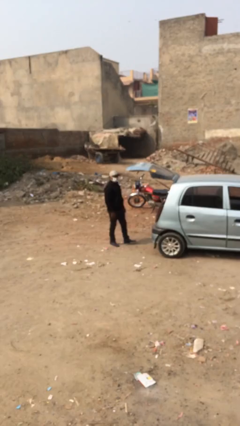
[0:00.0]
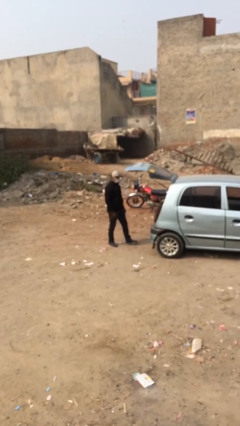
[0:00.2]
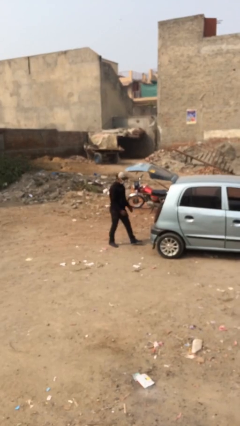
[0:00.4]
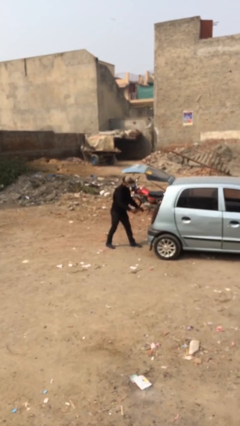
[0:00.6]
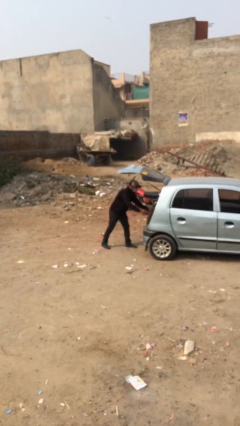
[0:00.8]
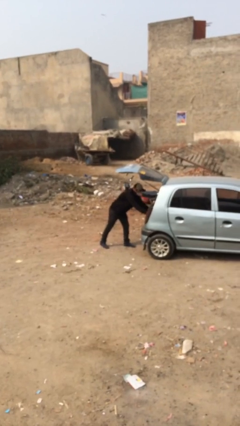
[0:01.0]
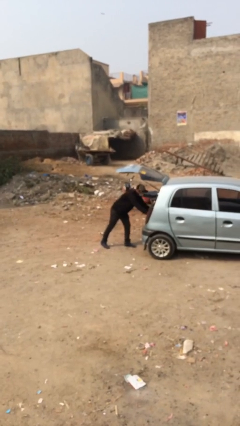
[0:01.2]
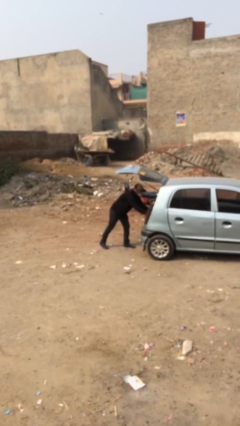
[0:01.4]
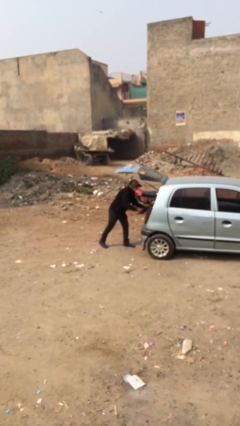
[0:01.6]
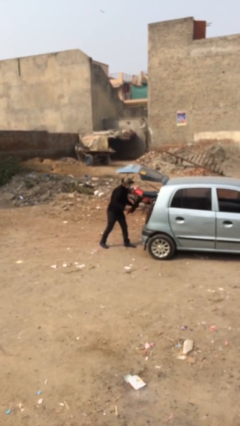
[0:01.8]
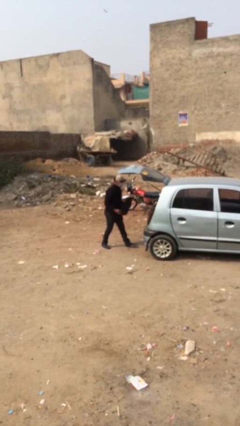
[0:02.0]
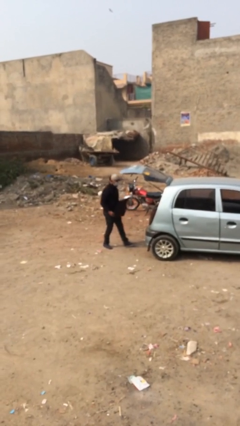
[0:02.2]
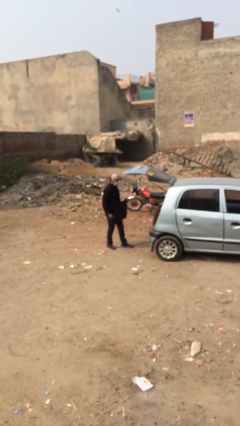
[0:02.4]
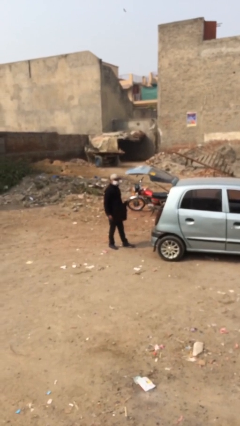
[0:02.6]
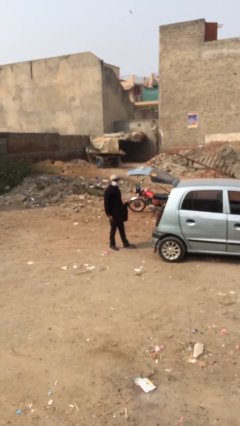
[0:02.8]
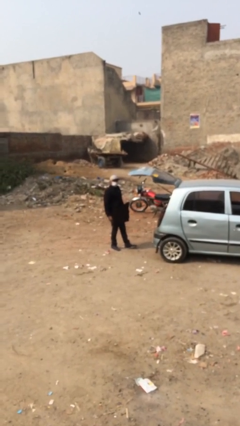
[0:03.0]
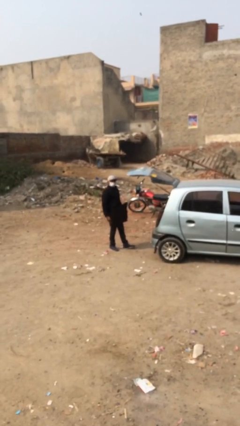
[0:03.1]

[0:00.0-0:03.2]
person unloads car

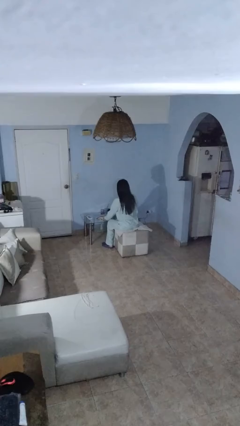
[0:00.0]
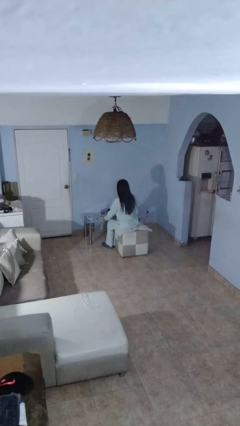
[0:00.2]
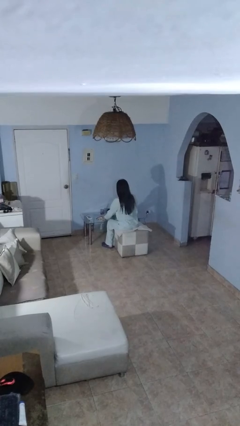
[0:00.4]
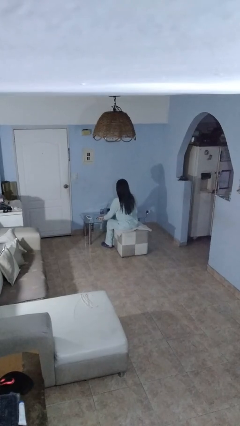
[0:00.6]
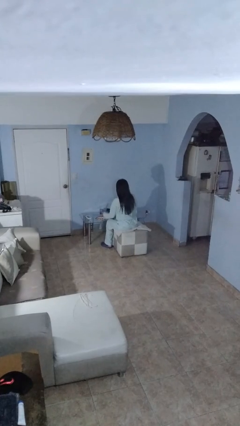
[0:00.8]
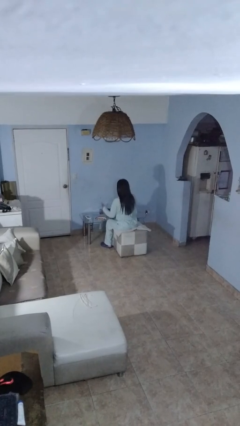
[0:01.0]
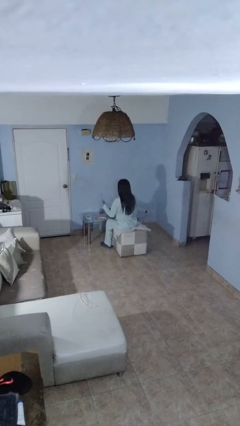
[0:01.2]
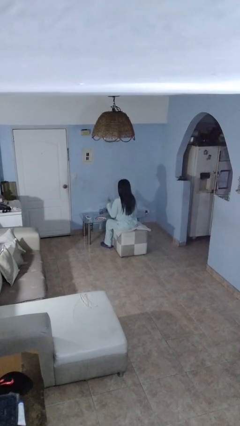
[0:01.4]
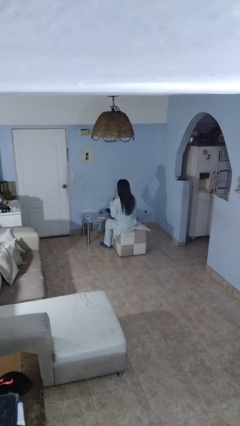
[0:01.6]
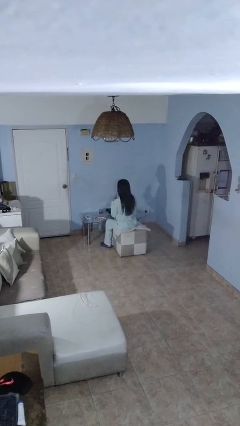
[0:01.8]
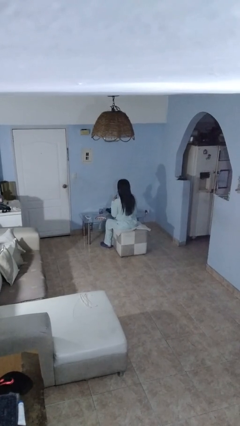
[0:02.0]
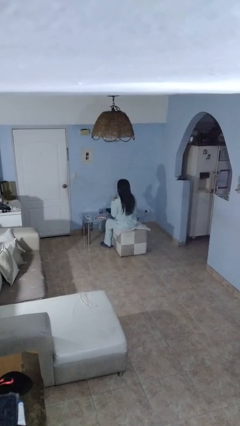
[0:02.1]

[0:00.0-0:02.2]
person turns off lamp

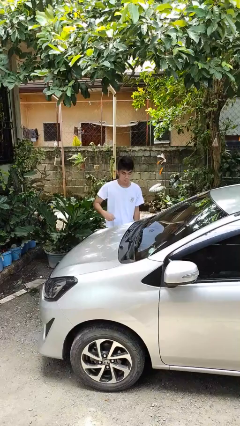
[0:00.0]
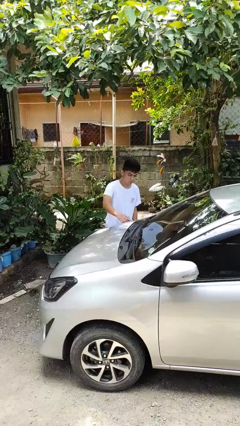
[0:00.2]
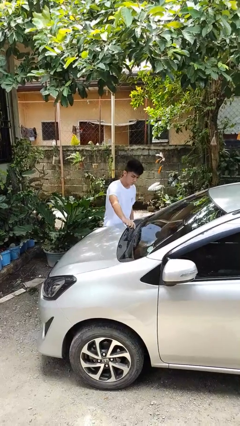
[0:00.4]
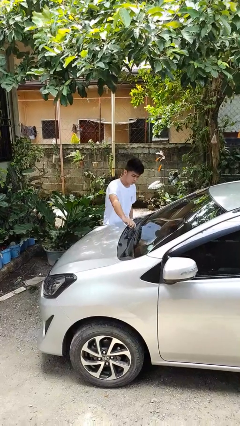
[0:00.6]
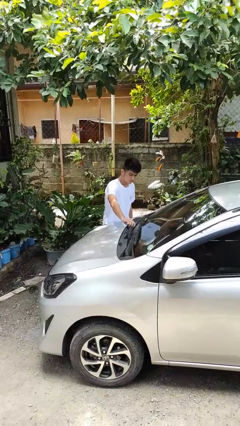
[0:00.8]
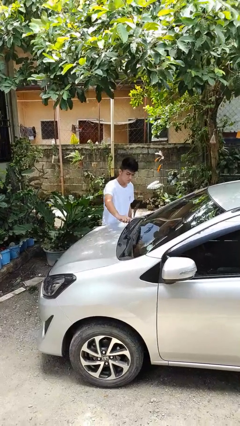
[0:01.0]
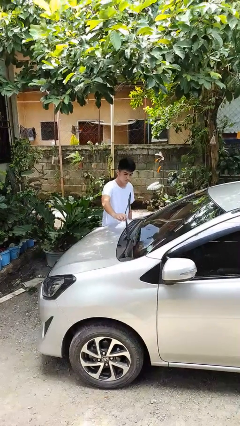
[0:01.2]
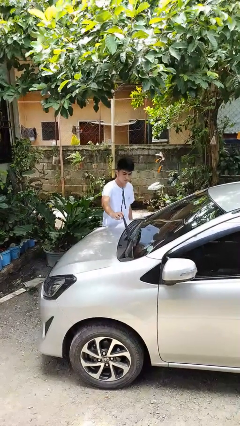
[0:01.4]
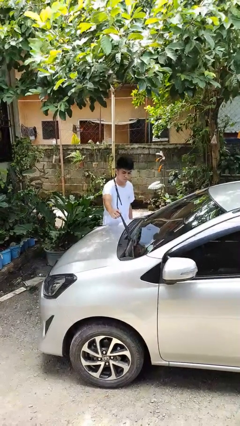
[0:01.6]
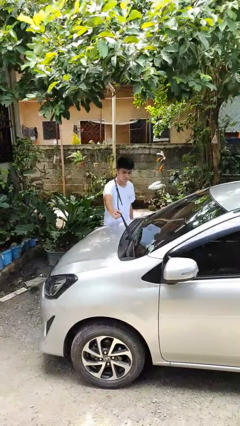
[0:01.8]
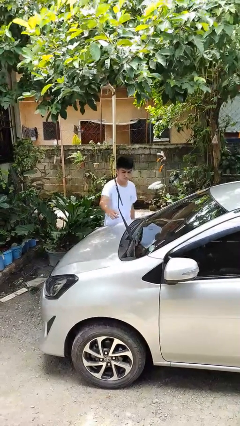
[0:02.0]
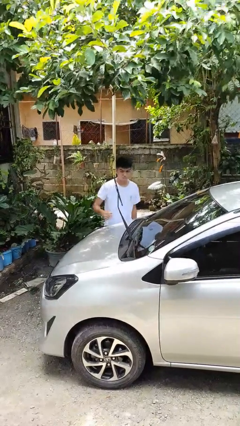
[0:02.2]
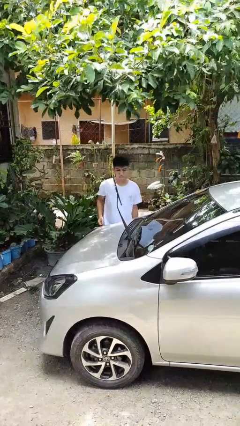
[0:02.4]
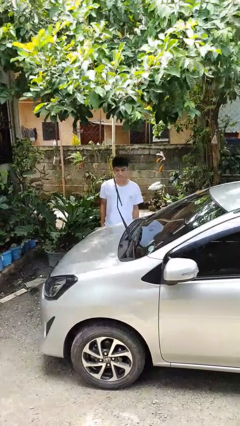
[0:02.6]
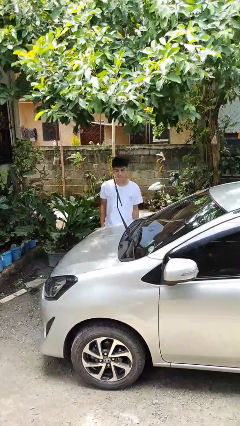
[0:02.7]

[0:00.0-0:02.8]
person flips up car wipers

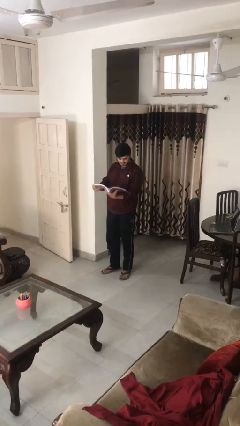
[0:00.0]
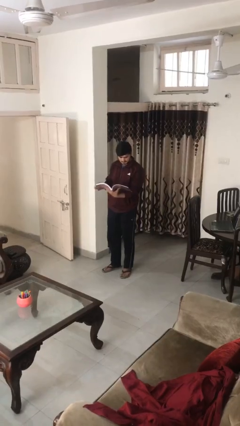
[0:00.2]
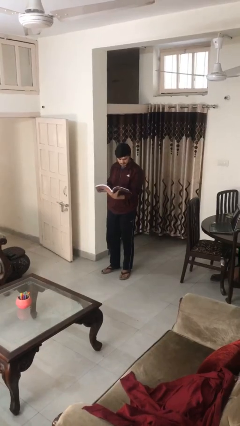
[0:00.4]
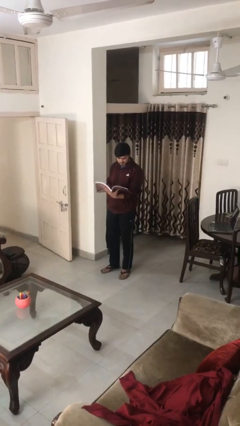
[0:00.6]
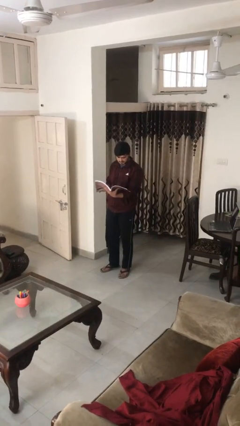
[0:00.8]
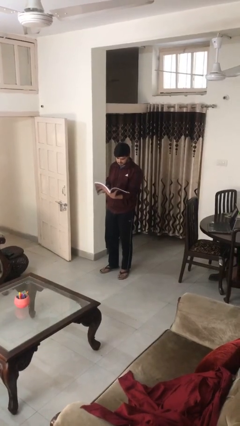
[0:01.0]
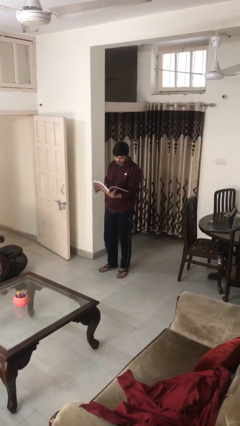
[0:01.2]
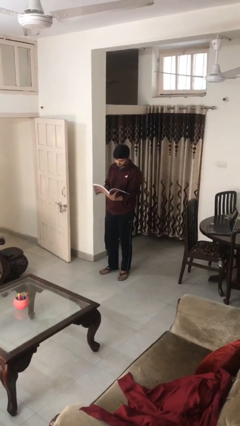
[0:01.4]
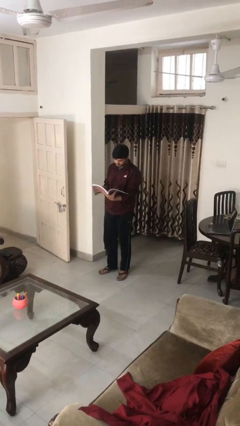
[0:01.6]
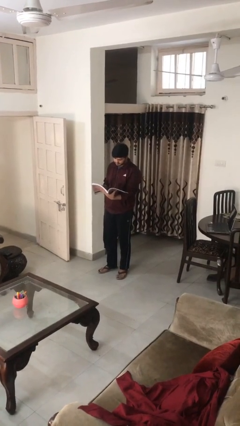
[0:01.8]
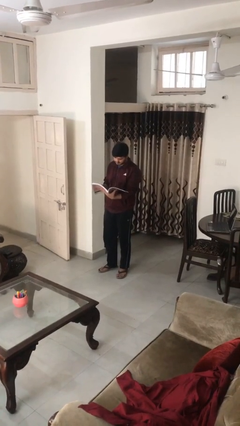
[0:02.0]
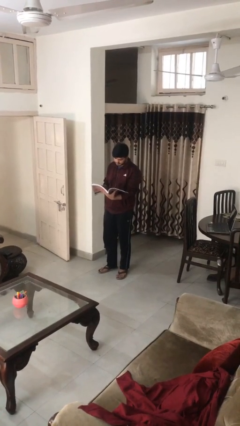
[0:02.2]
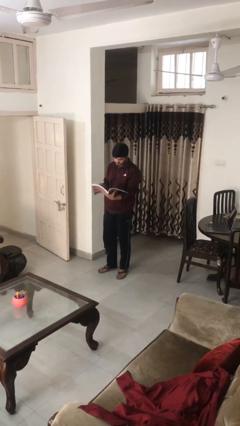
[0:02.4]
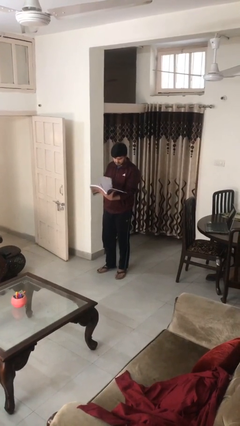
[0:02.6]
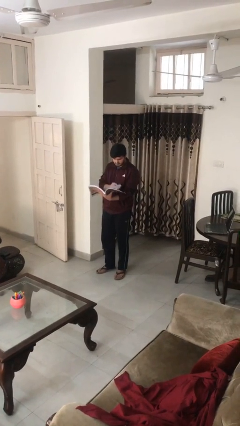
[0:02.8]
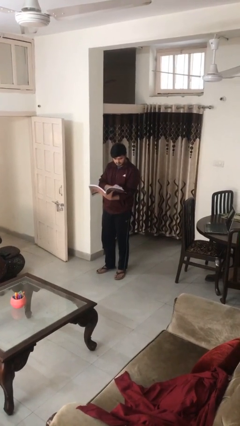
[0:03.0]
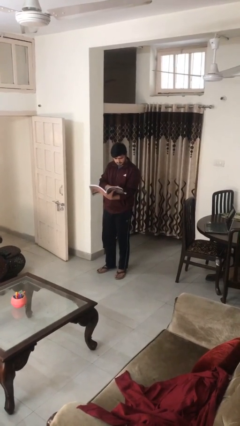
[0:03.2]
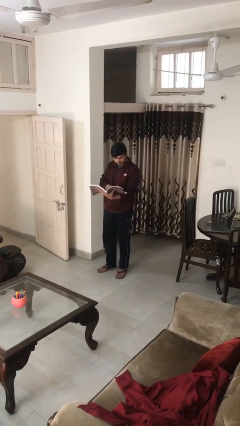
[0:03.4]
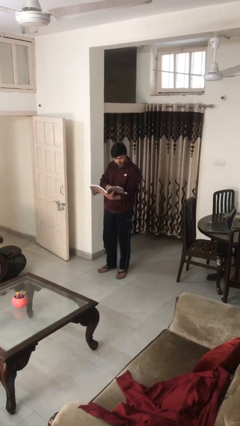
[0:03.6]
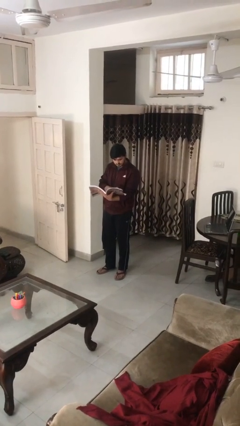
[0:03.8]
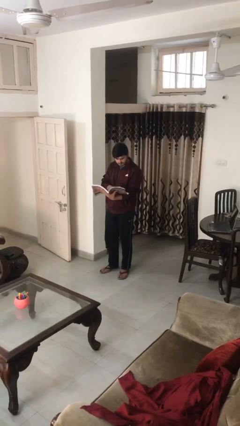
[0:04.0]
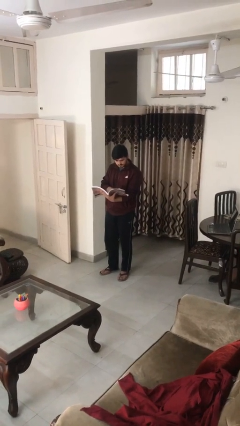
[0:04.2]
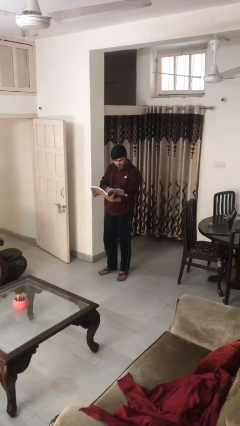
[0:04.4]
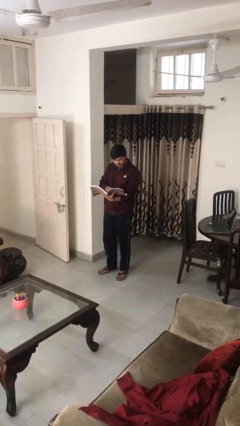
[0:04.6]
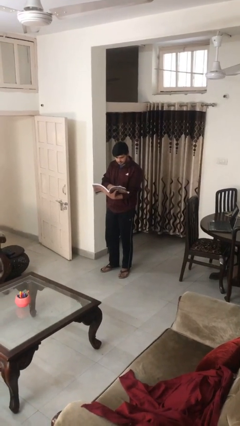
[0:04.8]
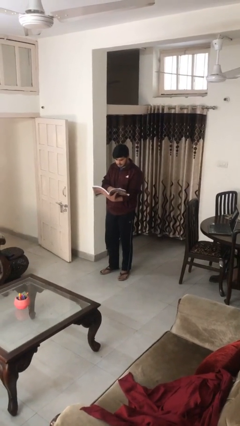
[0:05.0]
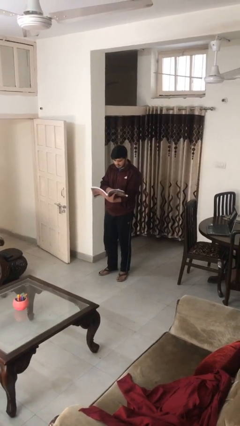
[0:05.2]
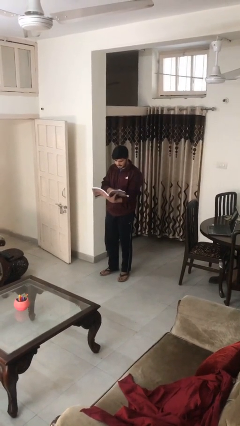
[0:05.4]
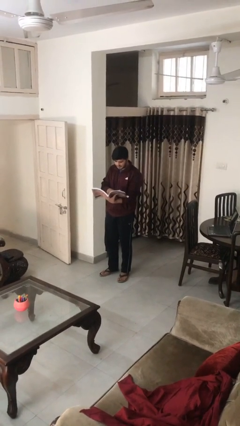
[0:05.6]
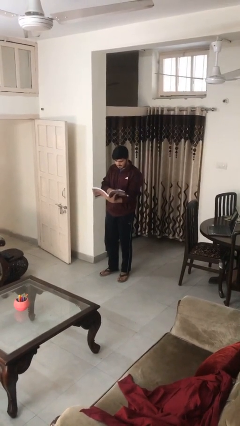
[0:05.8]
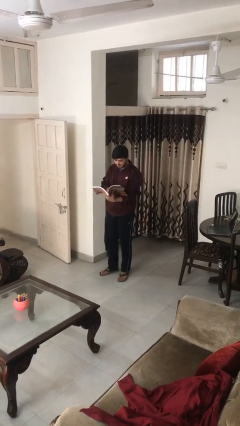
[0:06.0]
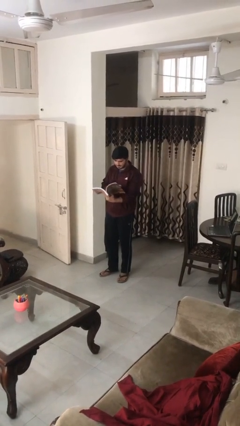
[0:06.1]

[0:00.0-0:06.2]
person reads document

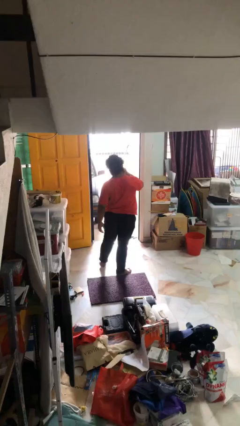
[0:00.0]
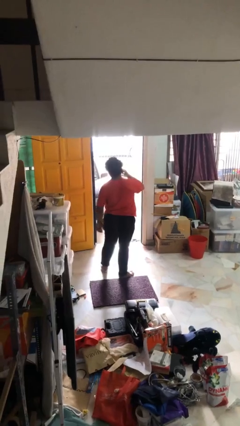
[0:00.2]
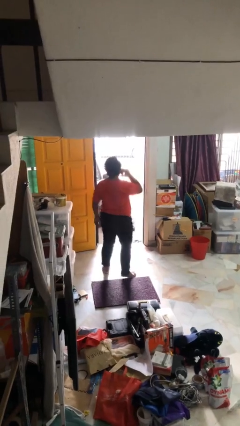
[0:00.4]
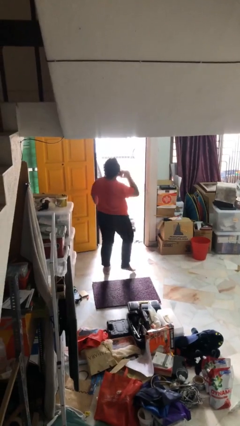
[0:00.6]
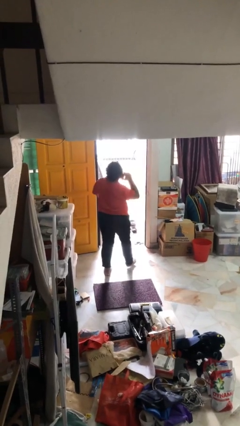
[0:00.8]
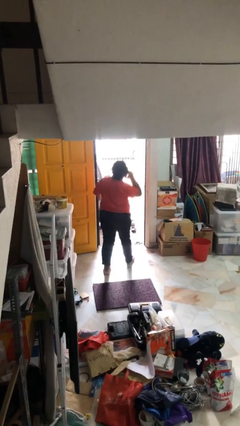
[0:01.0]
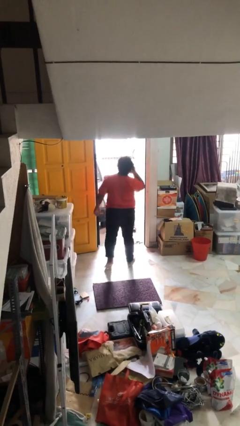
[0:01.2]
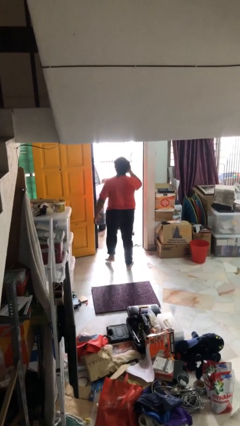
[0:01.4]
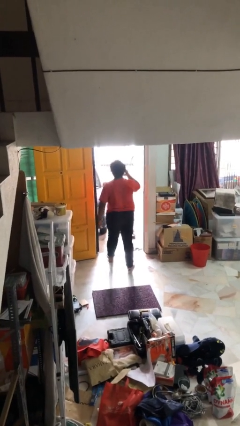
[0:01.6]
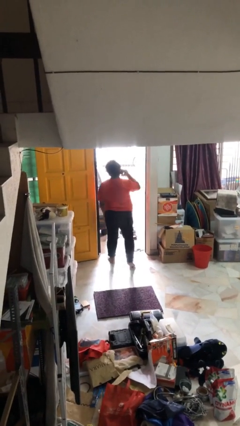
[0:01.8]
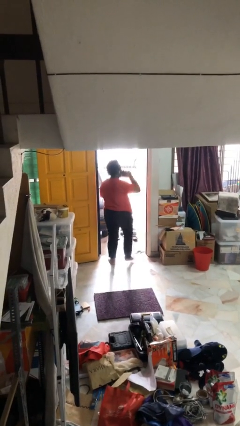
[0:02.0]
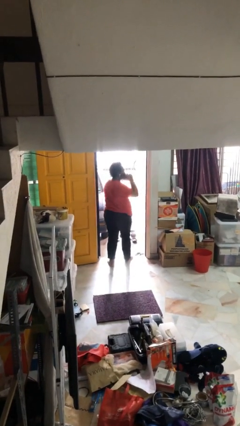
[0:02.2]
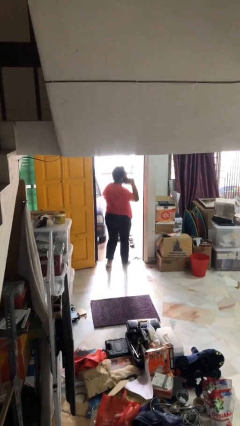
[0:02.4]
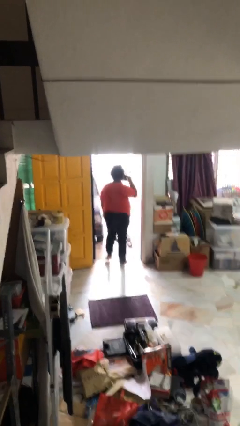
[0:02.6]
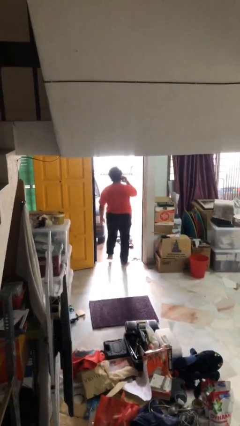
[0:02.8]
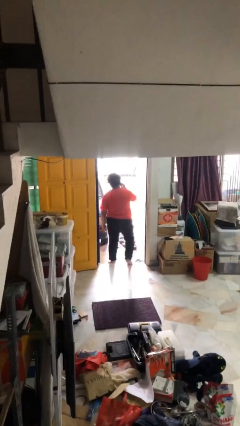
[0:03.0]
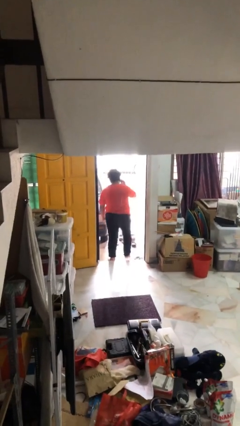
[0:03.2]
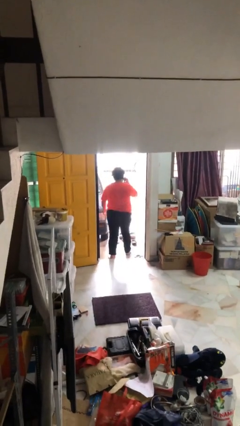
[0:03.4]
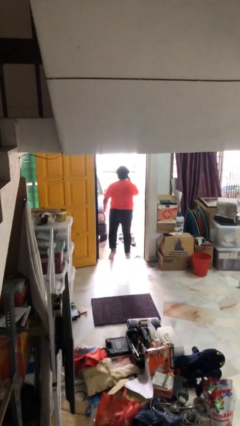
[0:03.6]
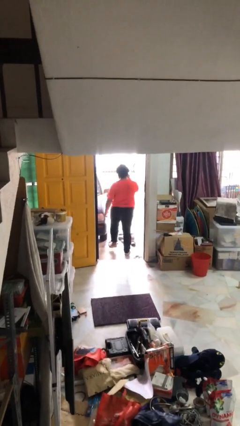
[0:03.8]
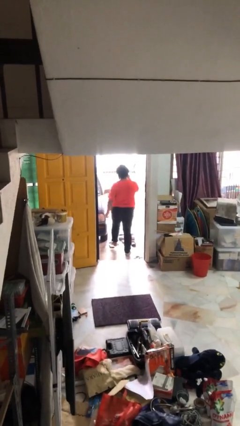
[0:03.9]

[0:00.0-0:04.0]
person exits scene through structure
